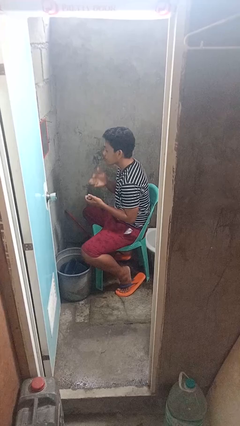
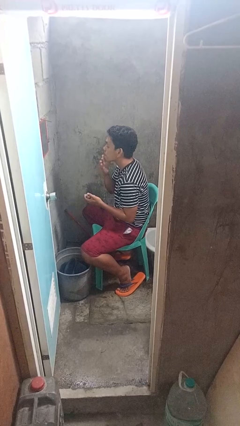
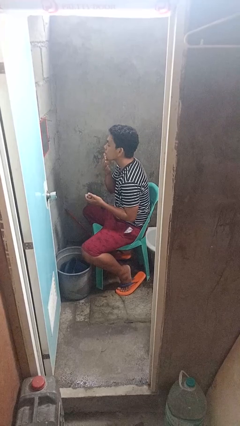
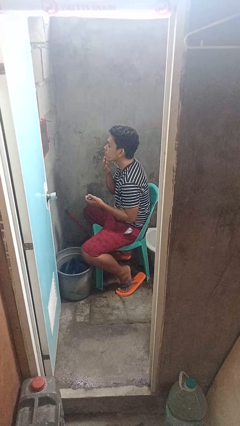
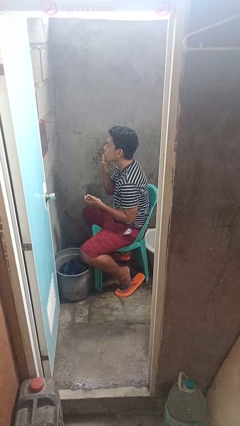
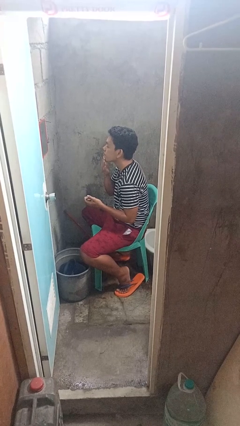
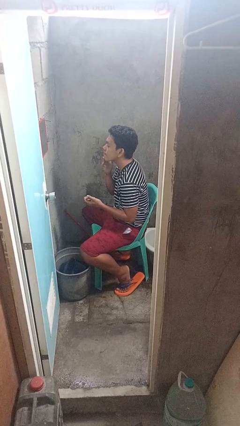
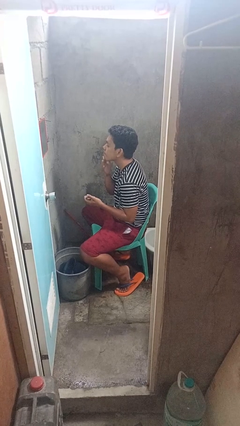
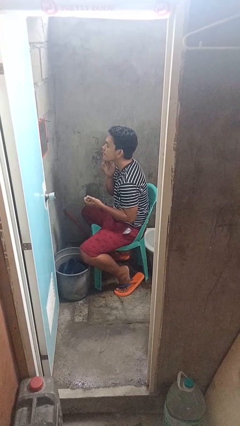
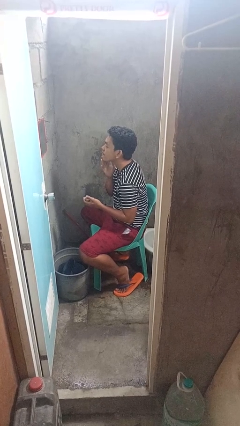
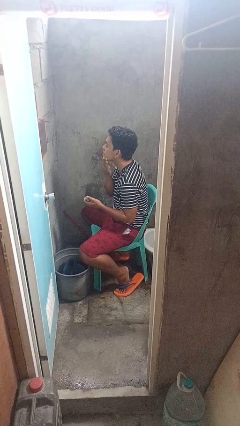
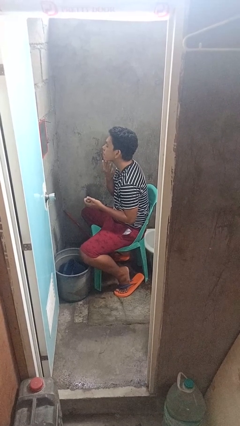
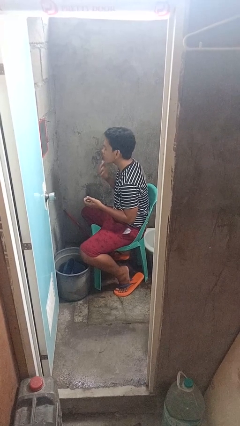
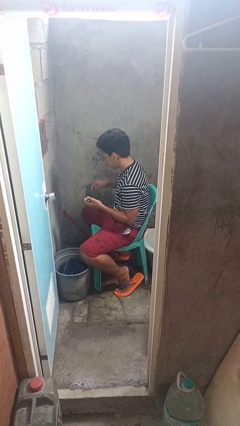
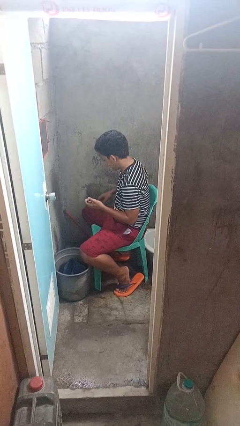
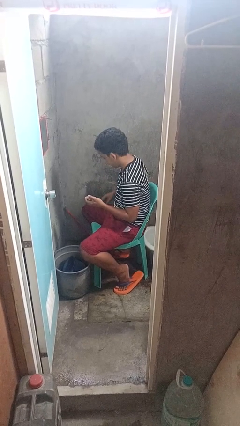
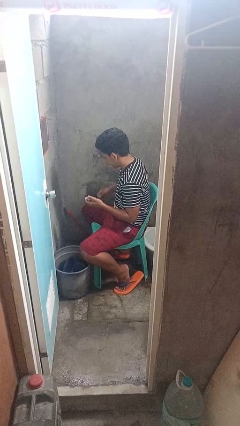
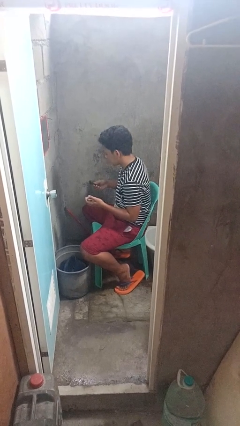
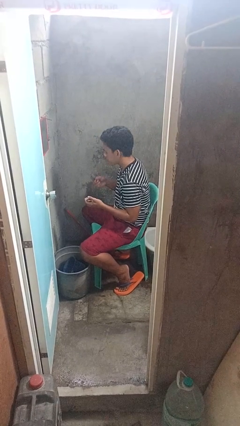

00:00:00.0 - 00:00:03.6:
person applies shaving cream

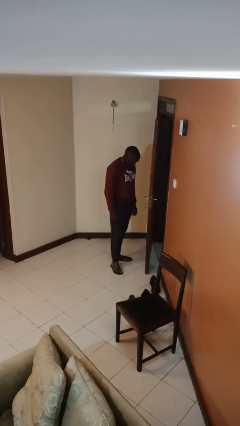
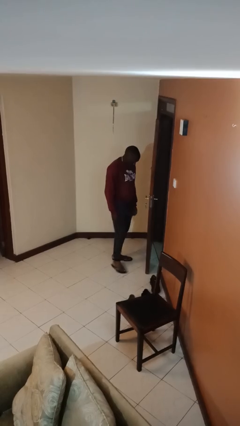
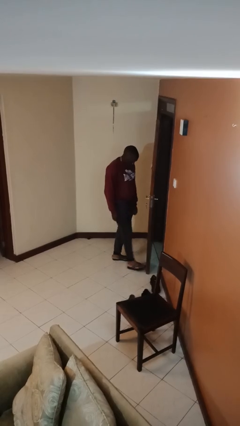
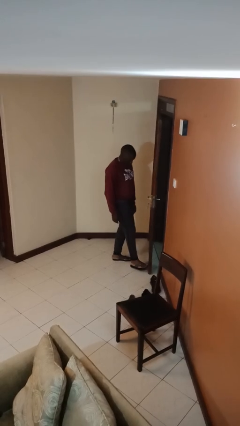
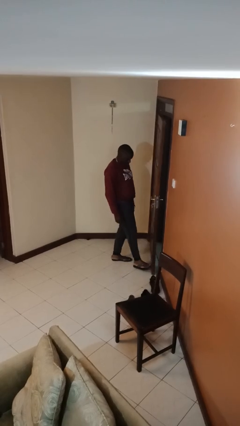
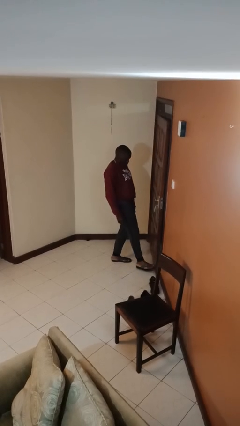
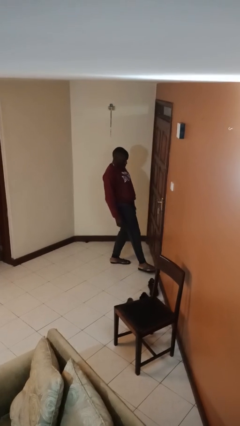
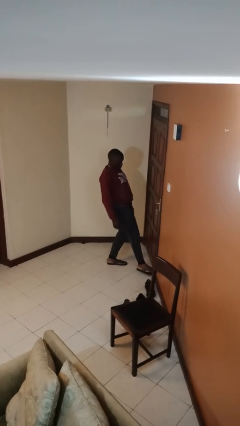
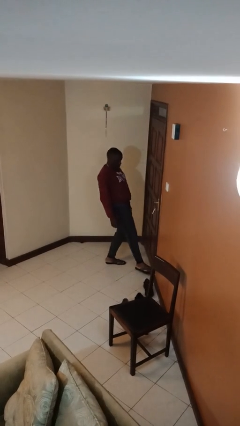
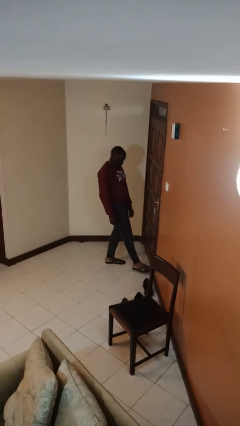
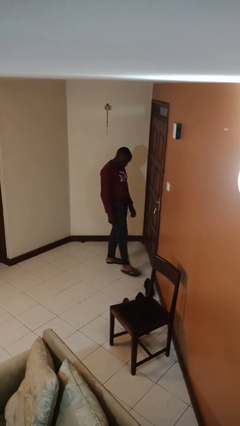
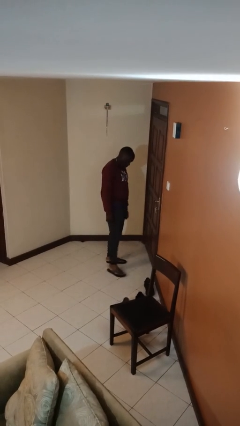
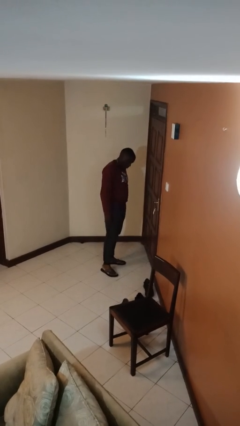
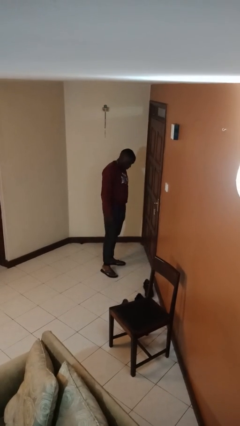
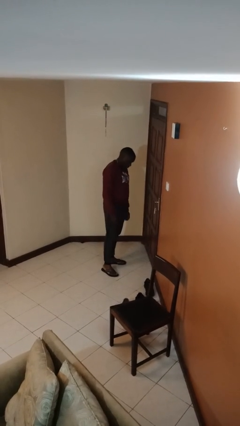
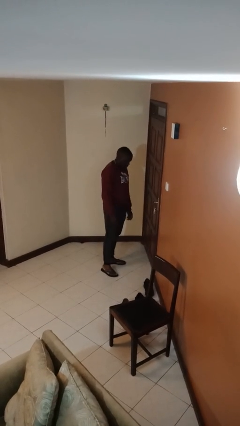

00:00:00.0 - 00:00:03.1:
person closes door with foot

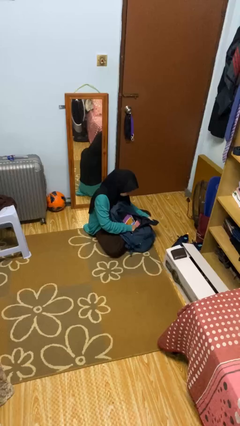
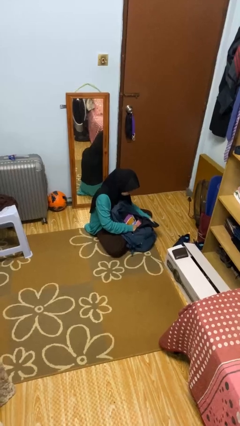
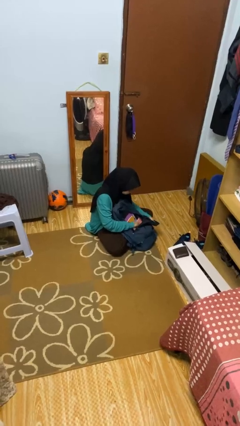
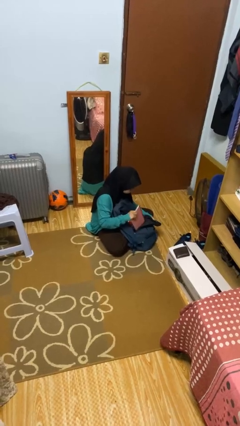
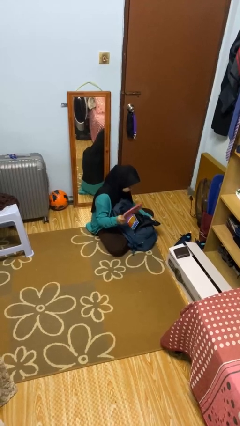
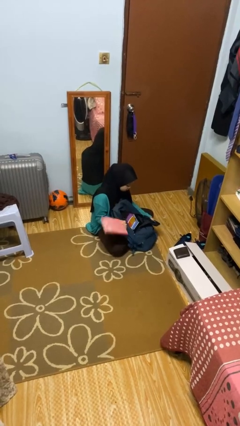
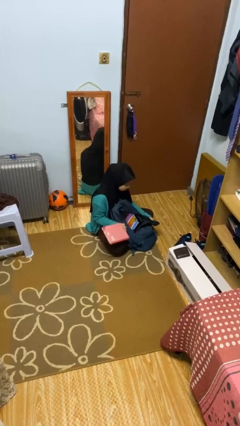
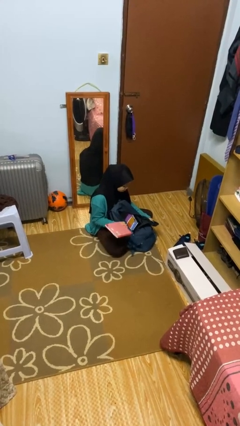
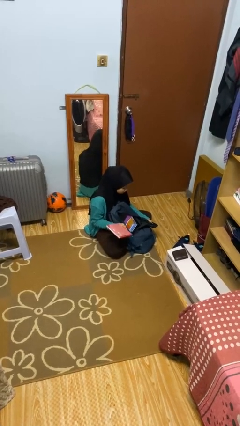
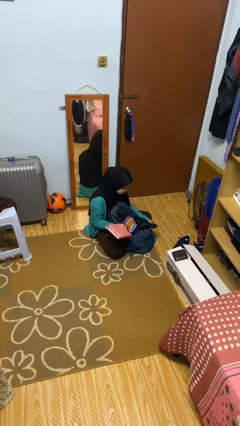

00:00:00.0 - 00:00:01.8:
person takes object from backpack

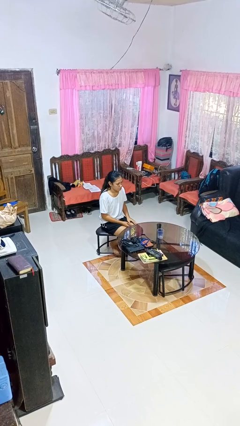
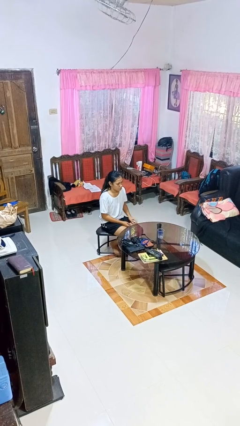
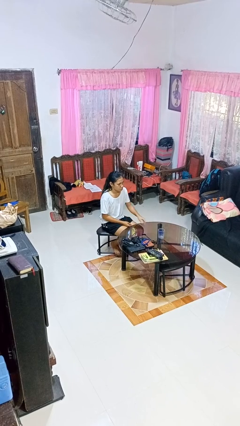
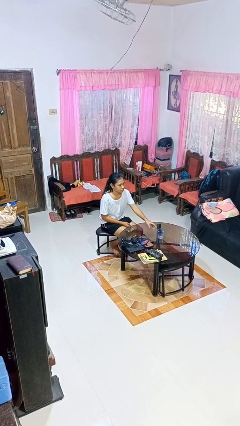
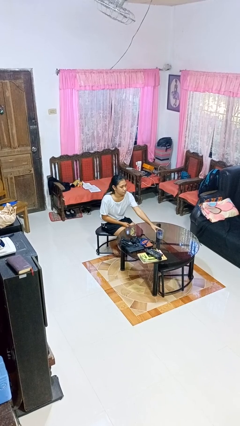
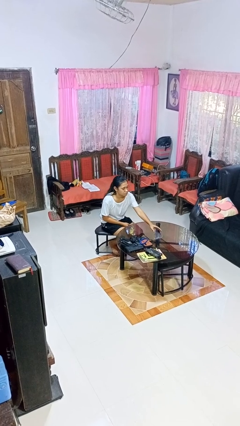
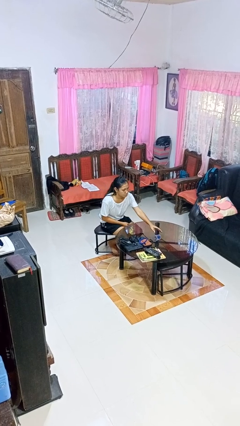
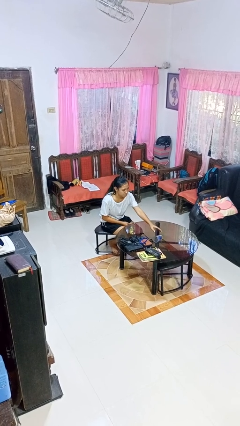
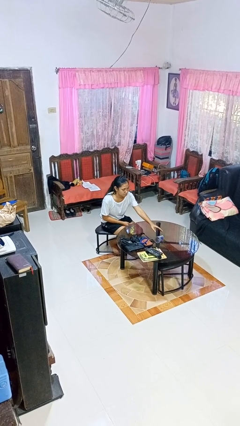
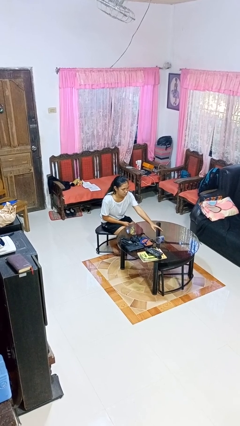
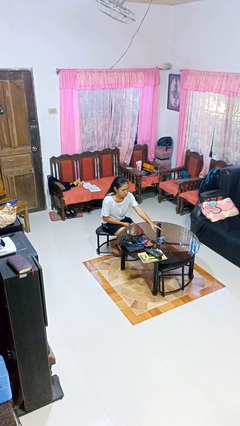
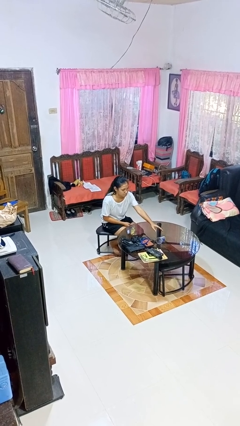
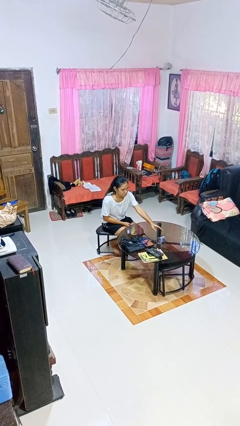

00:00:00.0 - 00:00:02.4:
person knocks over glass

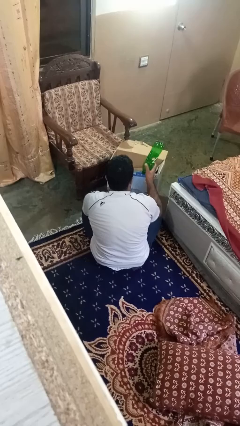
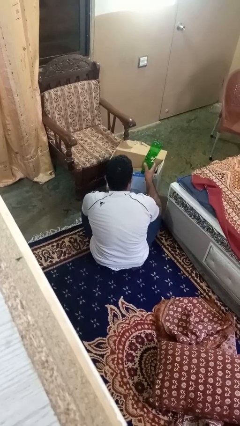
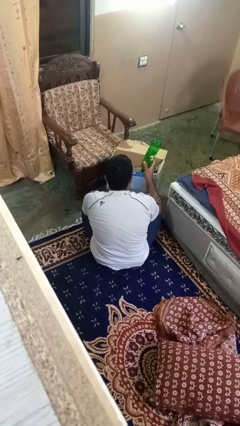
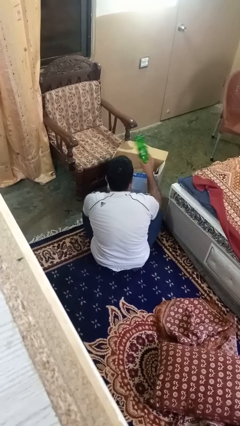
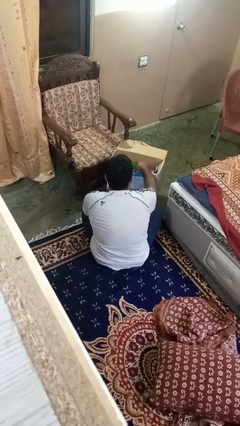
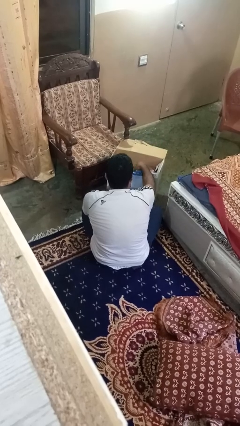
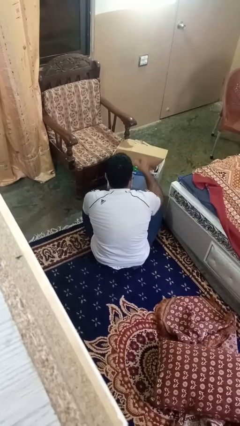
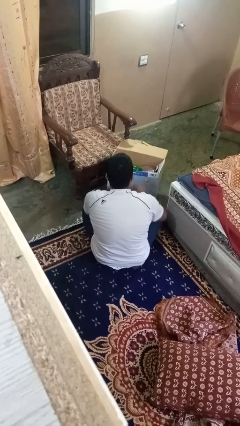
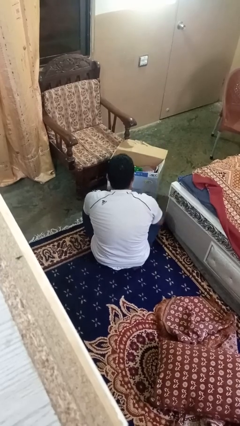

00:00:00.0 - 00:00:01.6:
person puts object into box

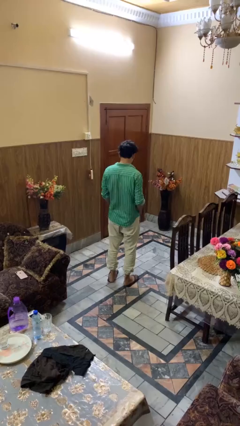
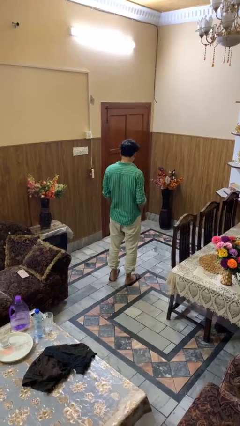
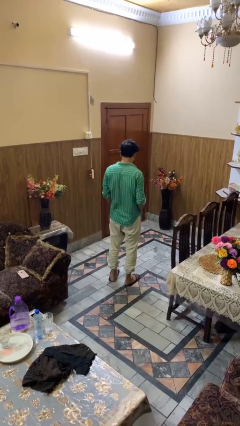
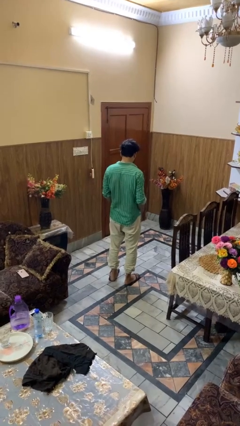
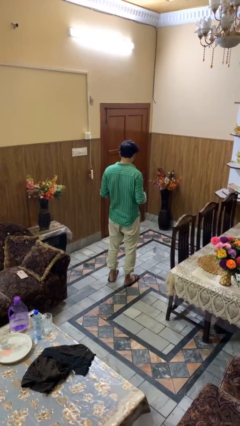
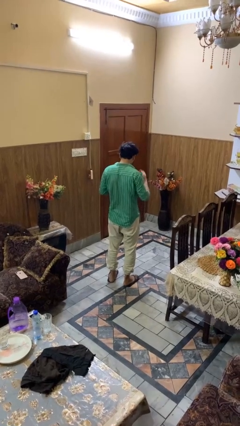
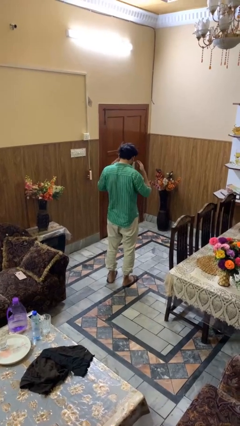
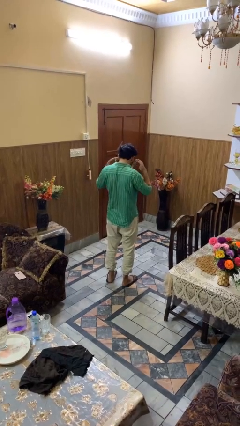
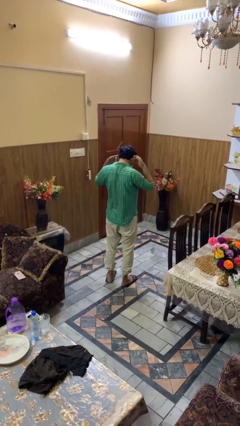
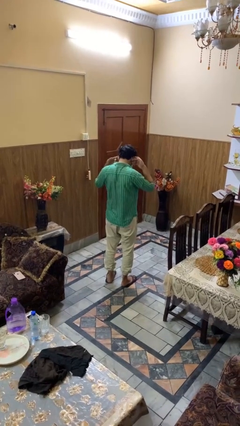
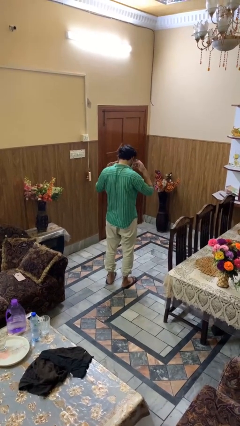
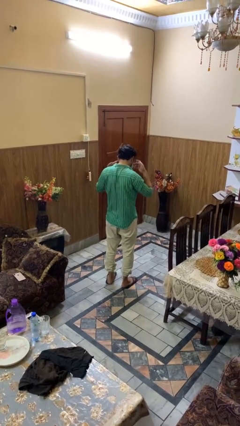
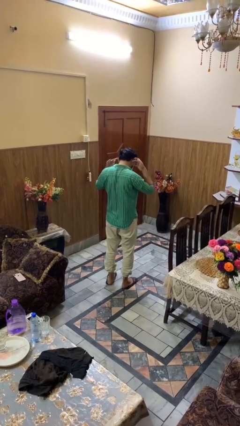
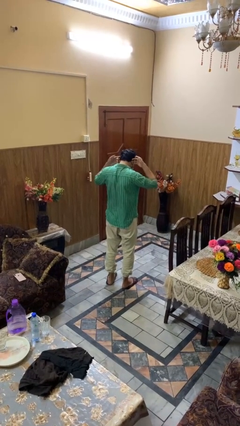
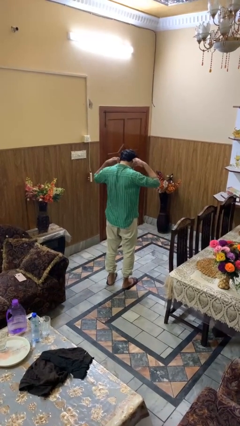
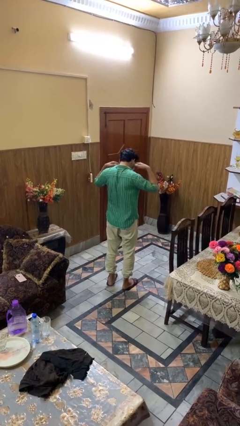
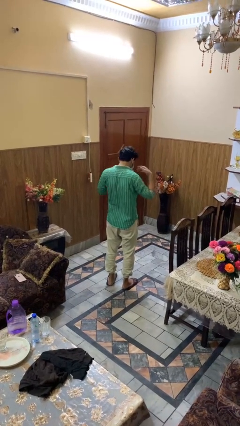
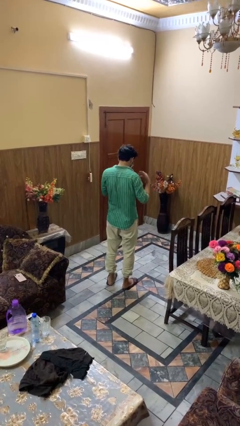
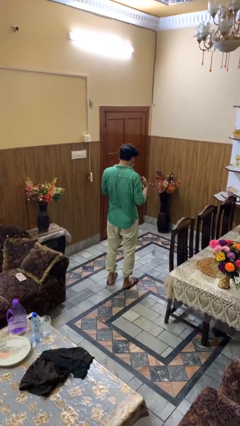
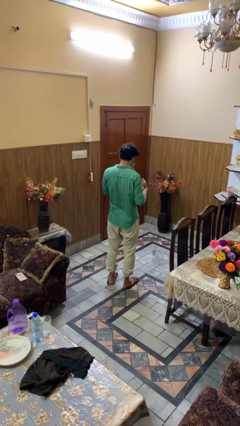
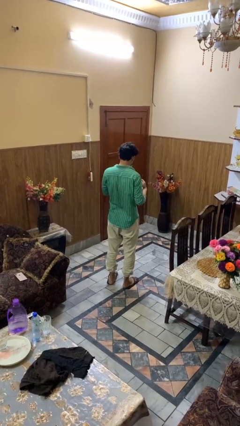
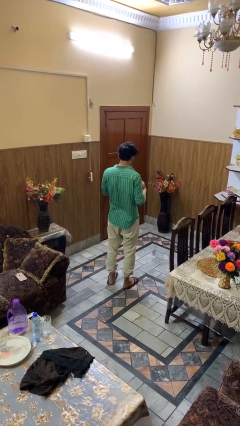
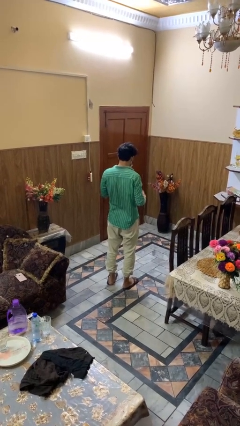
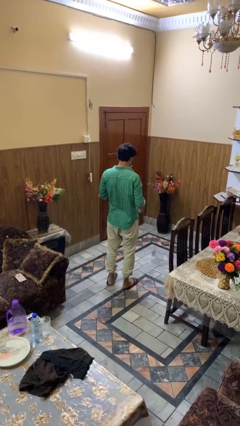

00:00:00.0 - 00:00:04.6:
person puts on facemask
